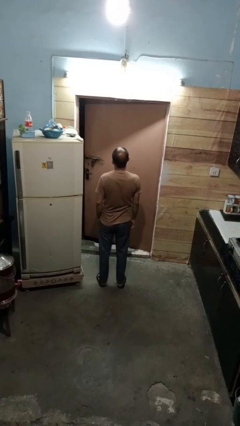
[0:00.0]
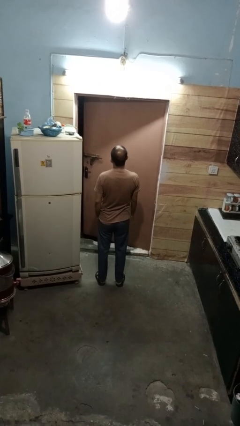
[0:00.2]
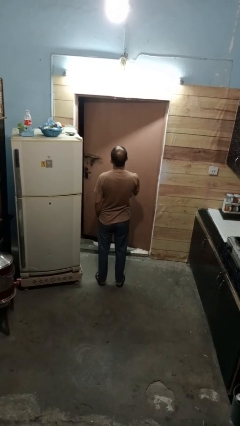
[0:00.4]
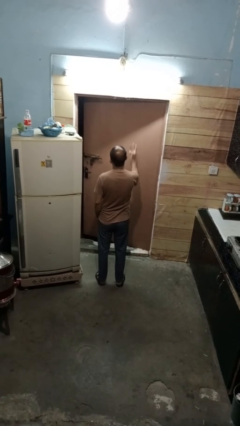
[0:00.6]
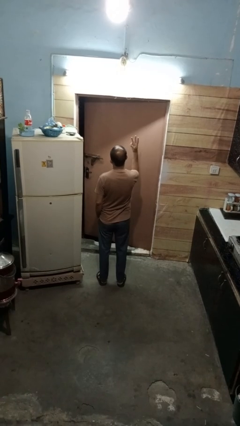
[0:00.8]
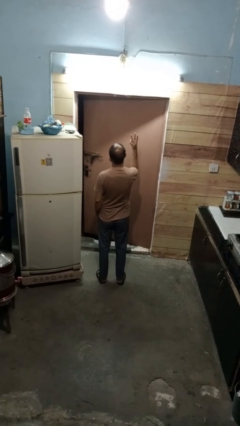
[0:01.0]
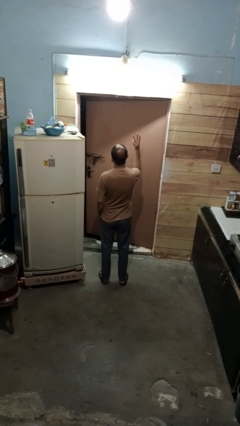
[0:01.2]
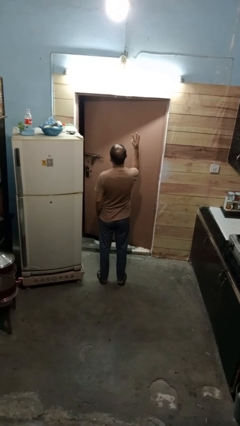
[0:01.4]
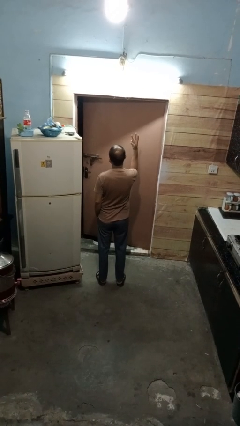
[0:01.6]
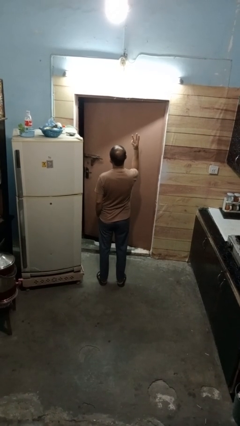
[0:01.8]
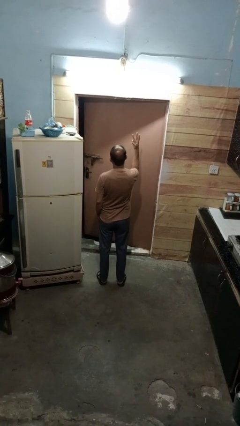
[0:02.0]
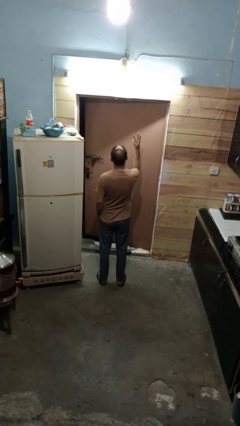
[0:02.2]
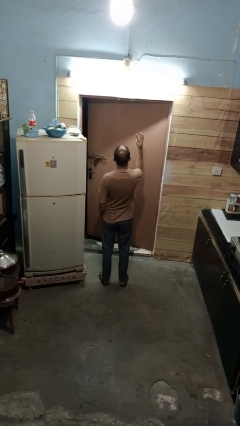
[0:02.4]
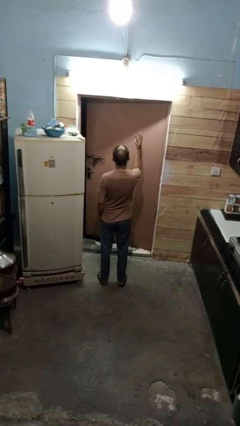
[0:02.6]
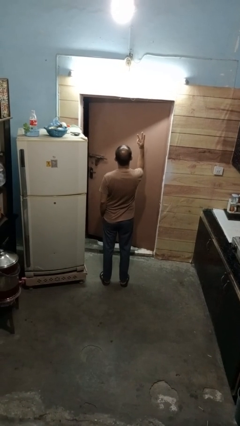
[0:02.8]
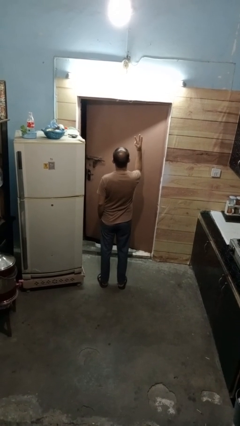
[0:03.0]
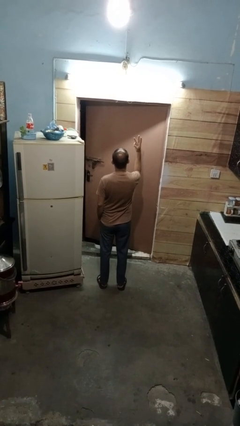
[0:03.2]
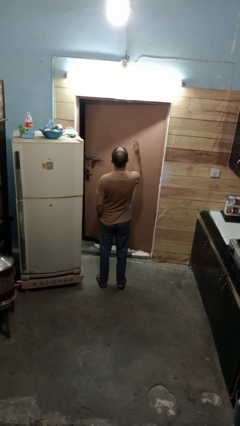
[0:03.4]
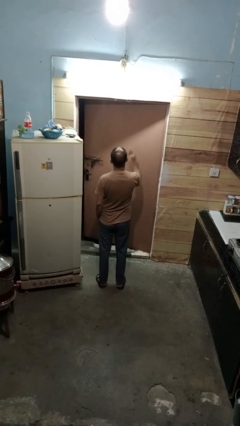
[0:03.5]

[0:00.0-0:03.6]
person gestures number three

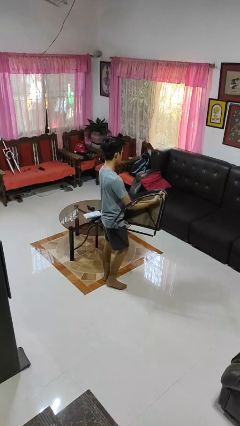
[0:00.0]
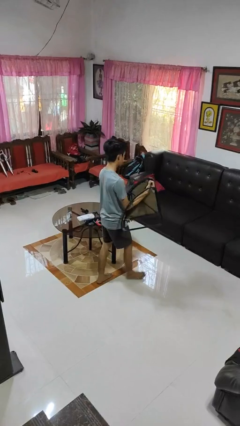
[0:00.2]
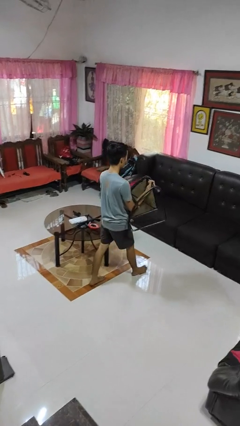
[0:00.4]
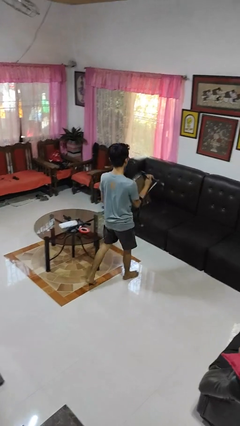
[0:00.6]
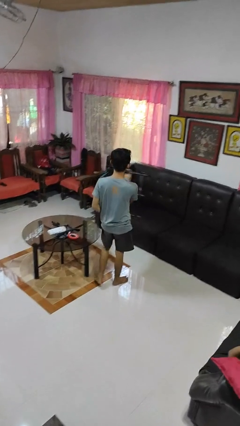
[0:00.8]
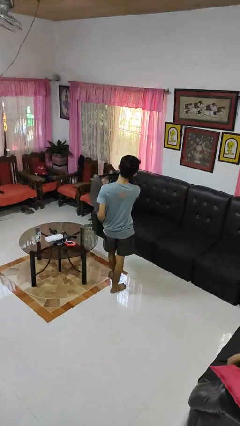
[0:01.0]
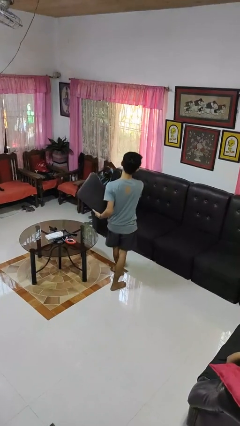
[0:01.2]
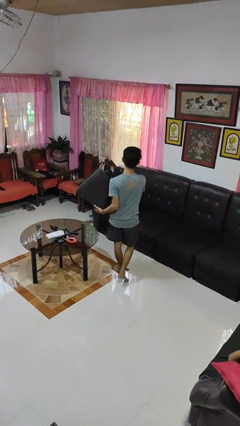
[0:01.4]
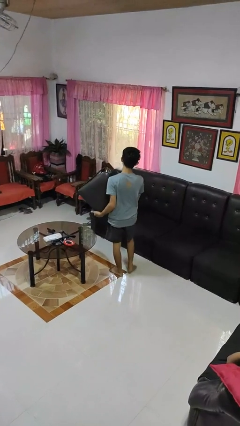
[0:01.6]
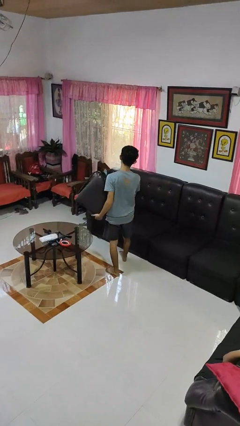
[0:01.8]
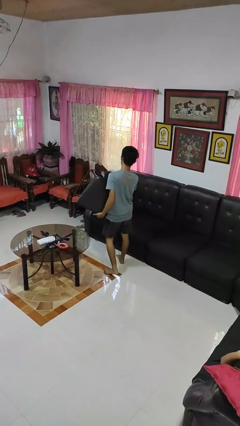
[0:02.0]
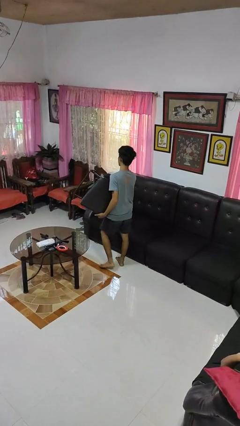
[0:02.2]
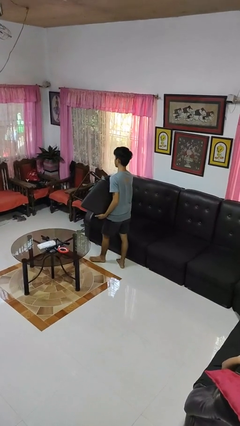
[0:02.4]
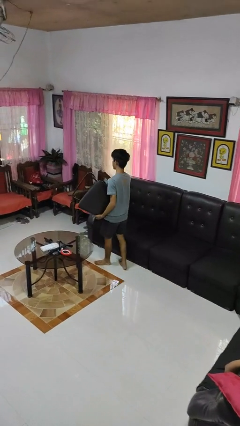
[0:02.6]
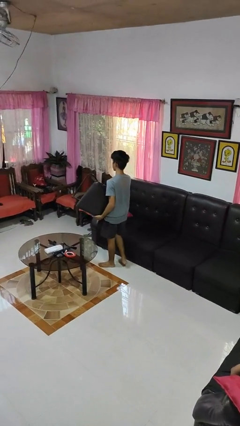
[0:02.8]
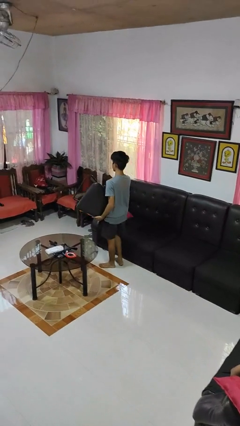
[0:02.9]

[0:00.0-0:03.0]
person carries furniture

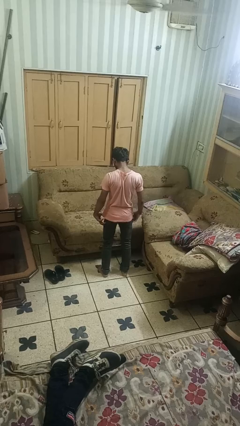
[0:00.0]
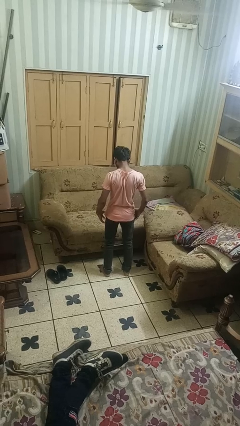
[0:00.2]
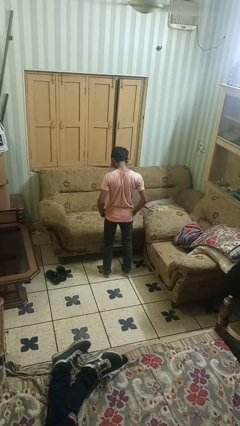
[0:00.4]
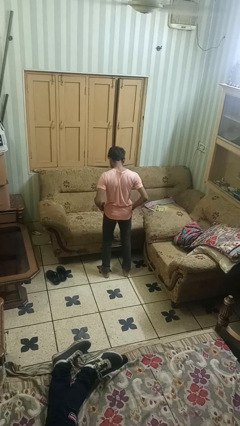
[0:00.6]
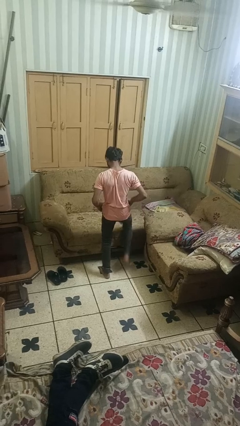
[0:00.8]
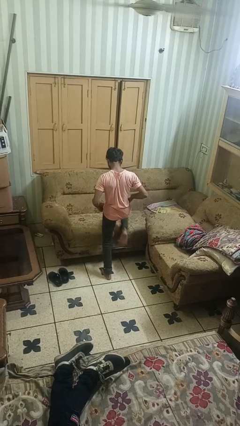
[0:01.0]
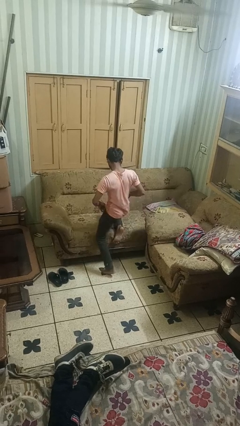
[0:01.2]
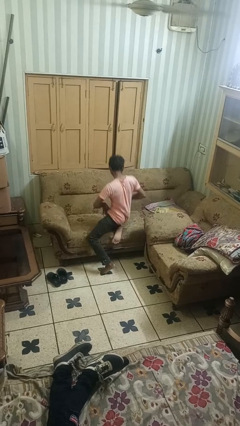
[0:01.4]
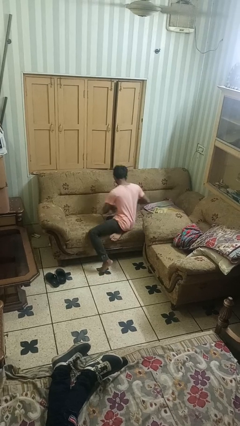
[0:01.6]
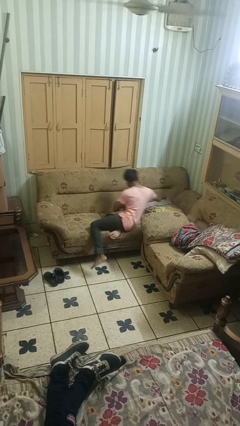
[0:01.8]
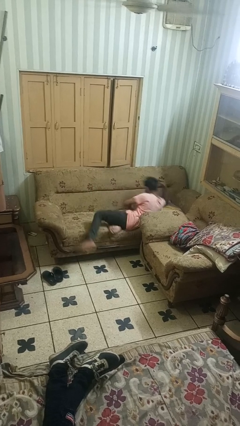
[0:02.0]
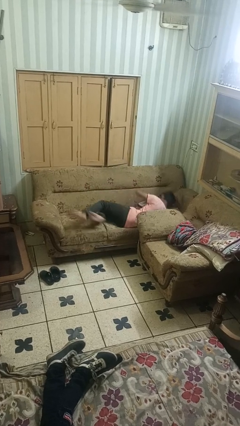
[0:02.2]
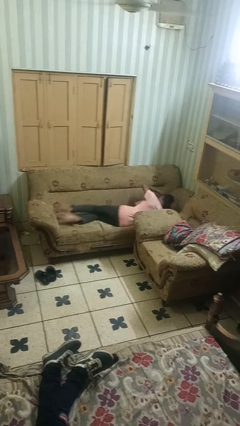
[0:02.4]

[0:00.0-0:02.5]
person lies down on couch

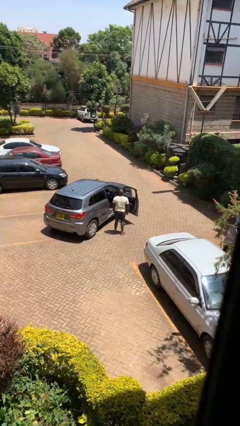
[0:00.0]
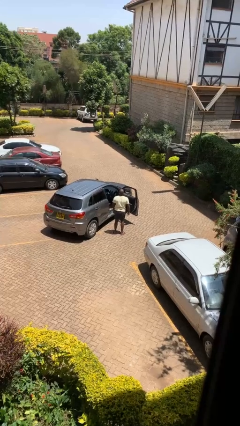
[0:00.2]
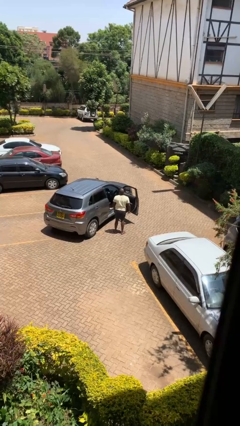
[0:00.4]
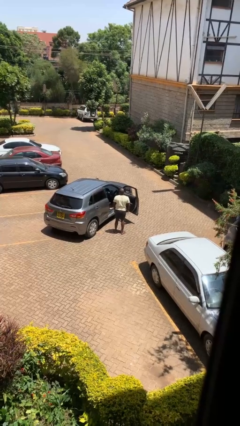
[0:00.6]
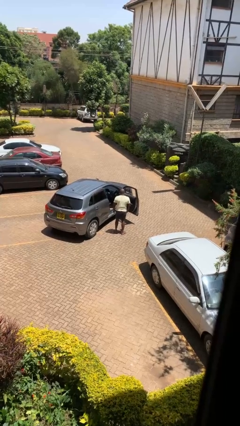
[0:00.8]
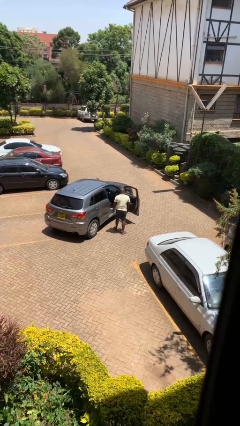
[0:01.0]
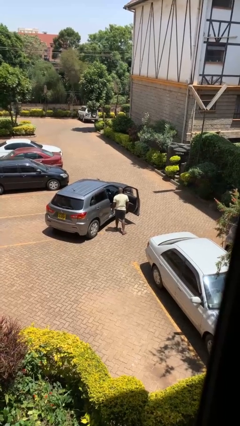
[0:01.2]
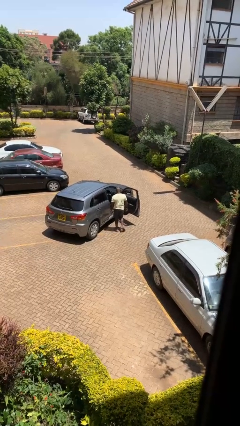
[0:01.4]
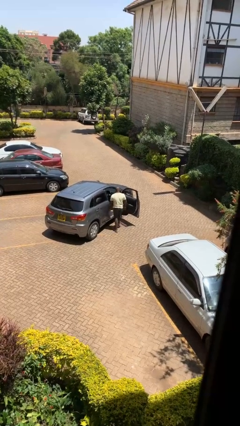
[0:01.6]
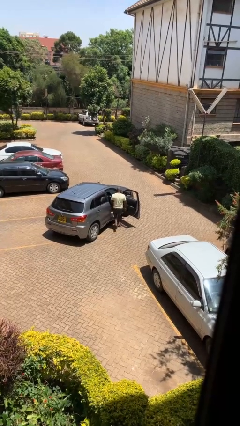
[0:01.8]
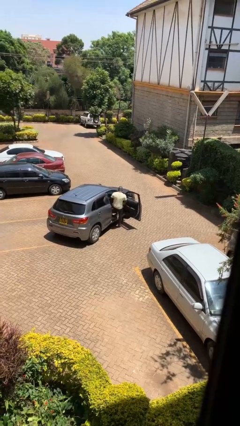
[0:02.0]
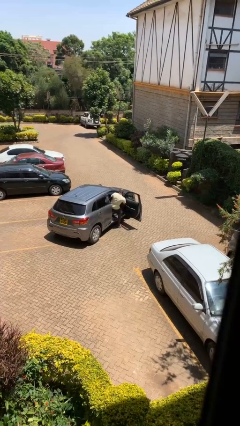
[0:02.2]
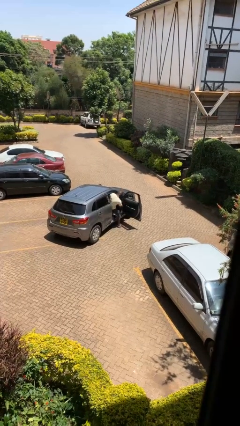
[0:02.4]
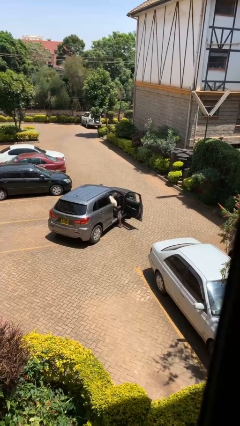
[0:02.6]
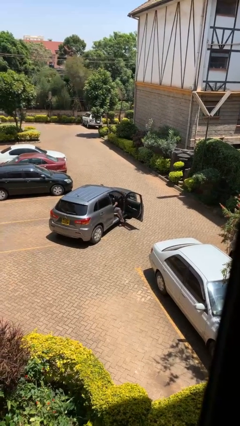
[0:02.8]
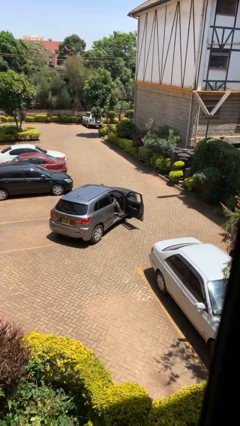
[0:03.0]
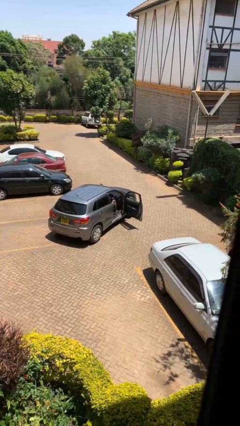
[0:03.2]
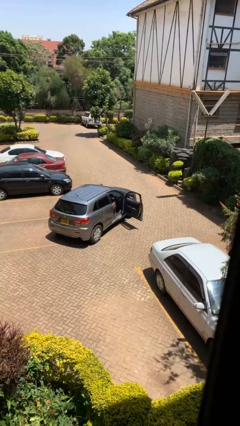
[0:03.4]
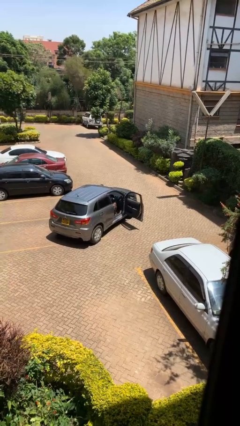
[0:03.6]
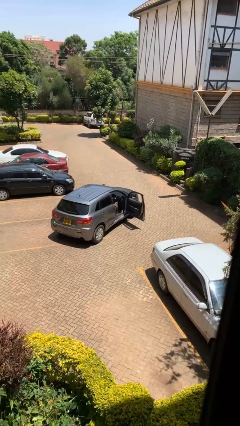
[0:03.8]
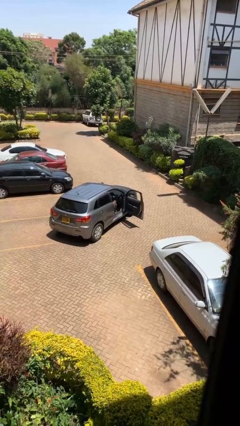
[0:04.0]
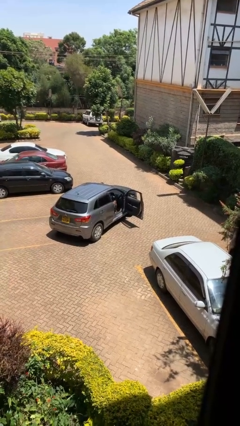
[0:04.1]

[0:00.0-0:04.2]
person enters car

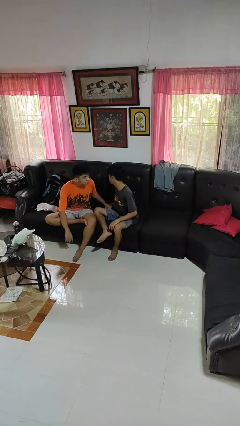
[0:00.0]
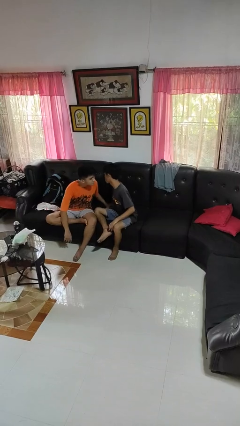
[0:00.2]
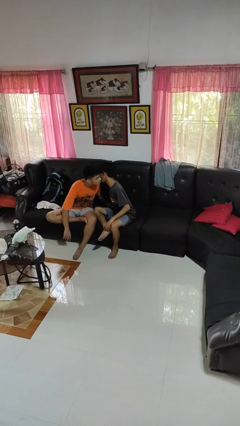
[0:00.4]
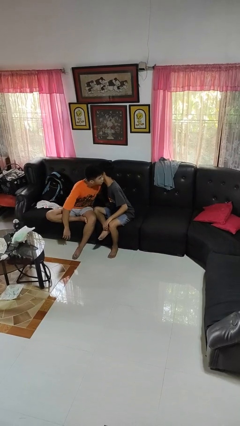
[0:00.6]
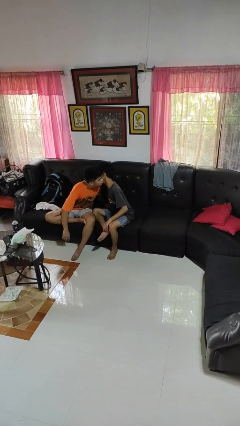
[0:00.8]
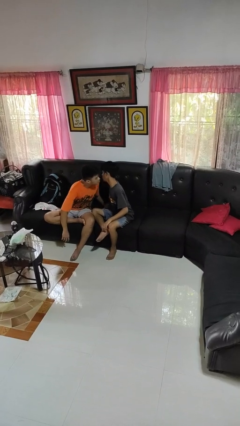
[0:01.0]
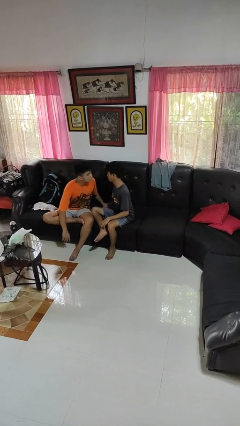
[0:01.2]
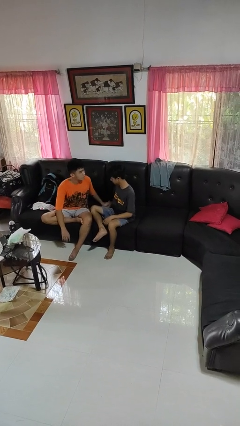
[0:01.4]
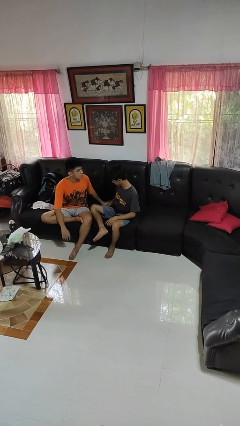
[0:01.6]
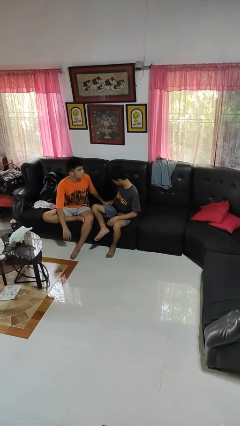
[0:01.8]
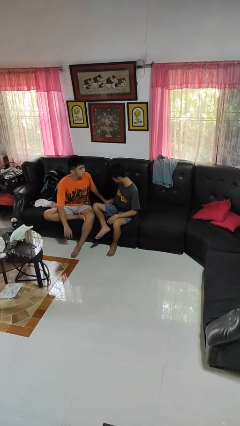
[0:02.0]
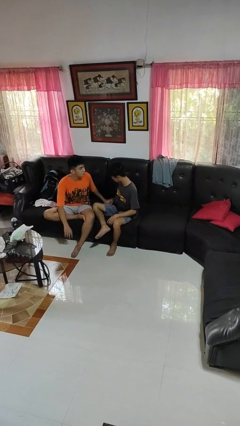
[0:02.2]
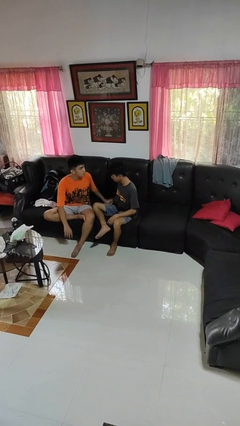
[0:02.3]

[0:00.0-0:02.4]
person kisses cheek of person

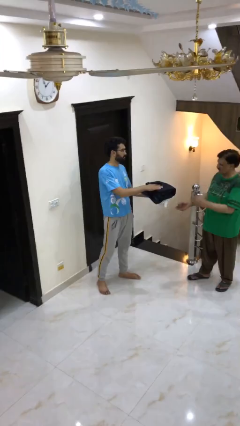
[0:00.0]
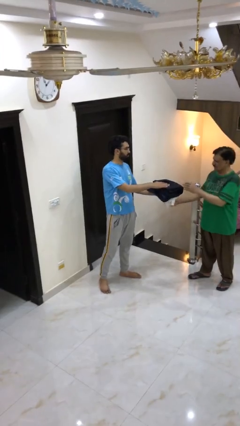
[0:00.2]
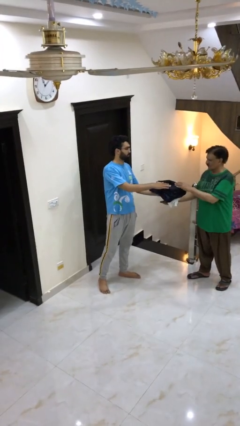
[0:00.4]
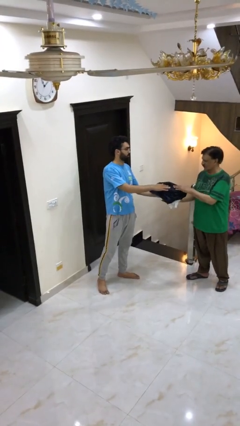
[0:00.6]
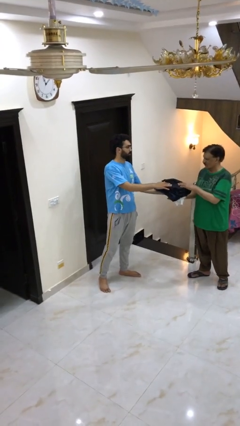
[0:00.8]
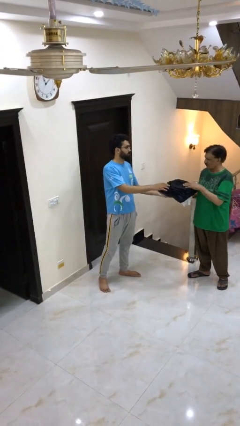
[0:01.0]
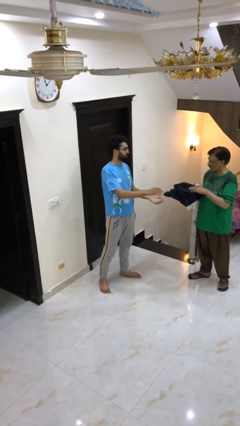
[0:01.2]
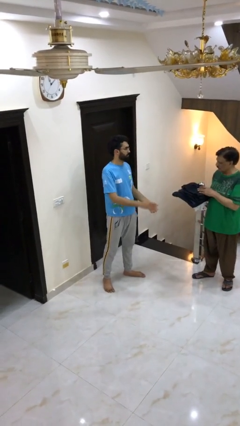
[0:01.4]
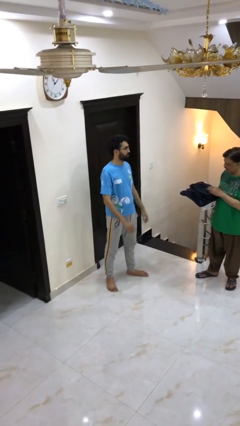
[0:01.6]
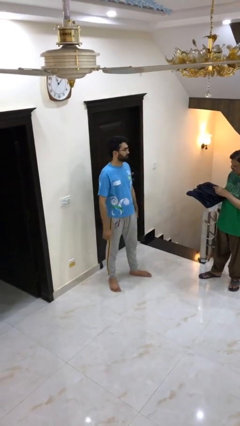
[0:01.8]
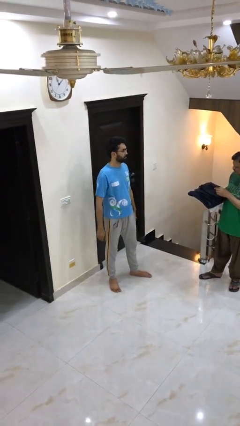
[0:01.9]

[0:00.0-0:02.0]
person transfers object to person

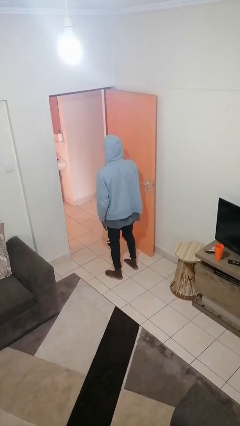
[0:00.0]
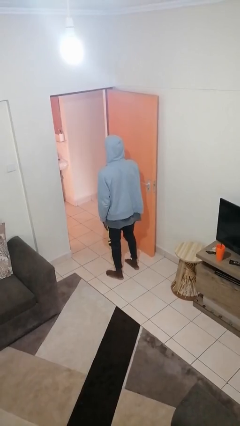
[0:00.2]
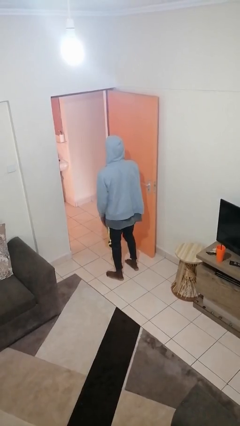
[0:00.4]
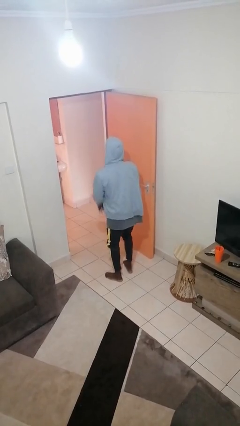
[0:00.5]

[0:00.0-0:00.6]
person karate chop
